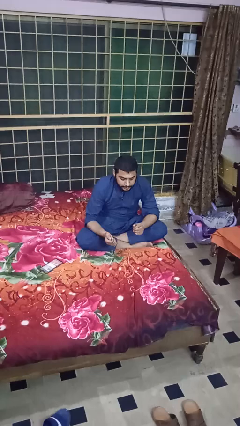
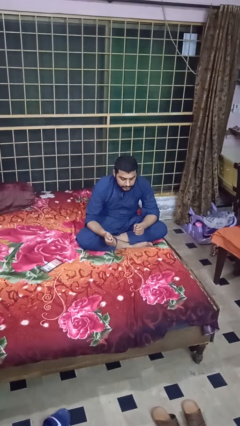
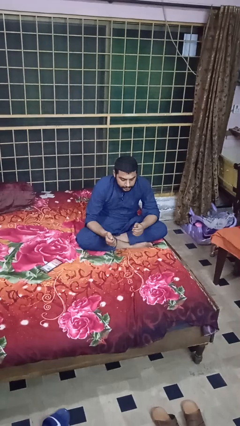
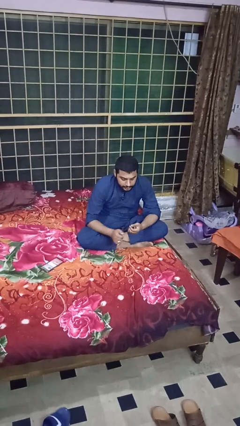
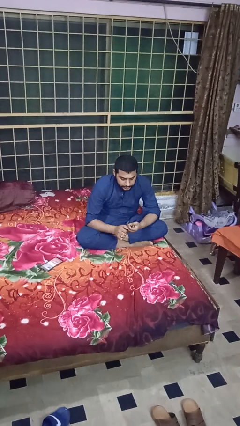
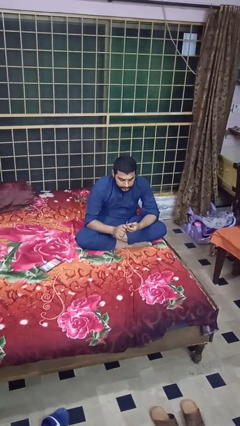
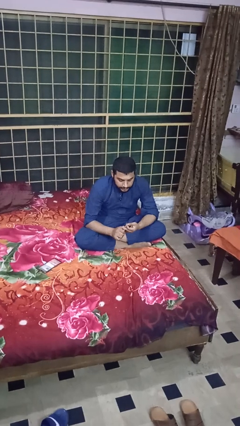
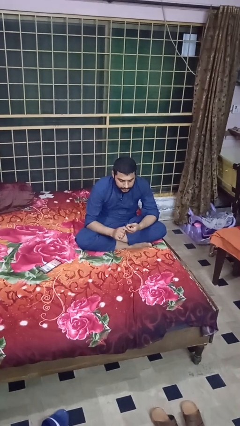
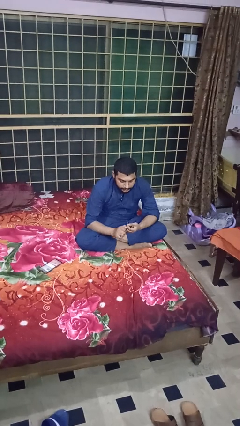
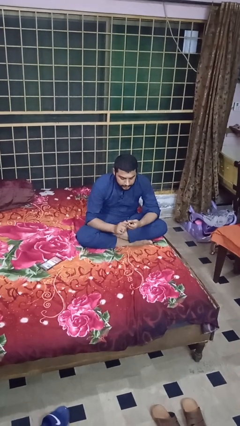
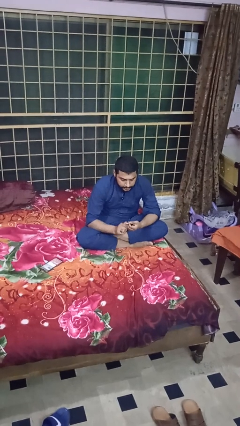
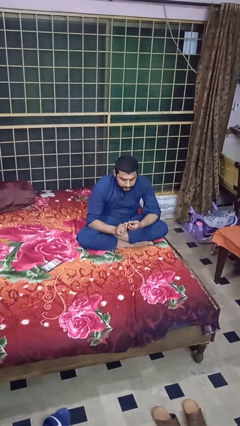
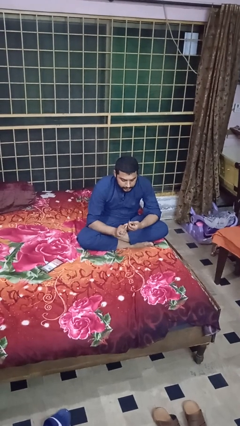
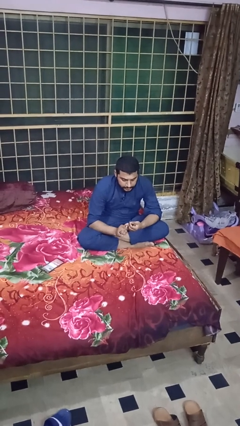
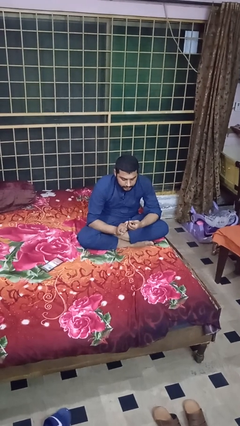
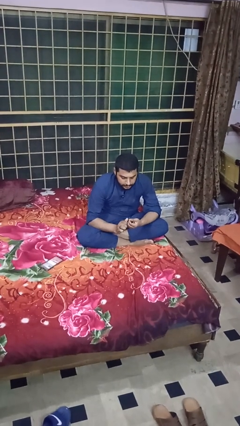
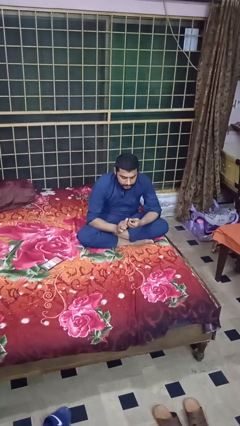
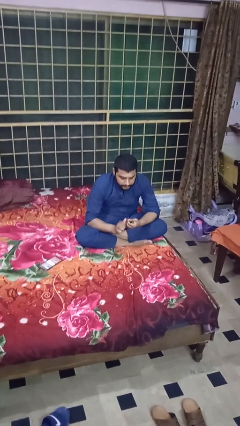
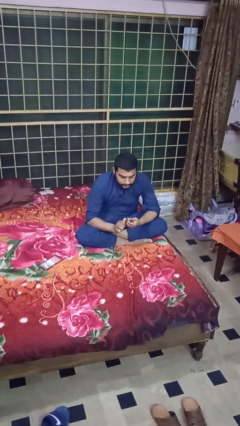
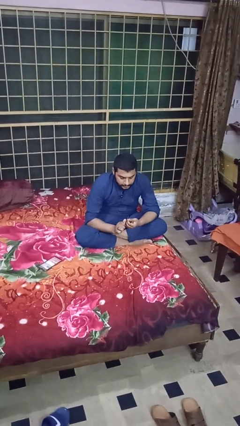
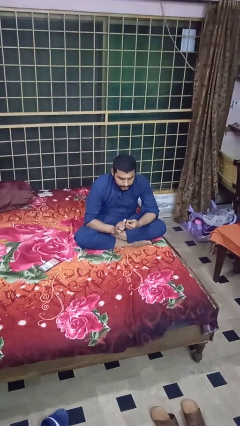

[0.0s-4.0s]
person files fingernails

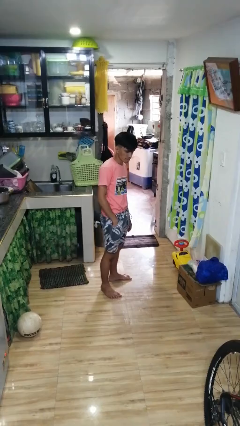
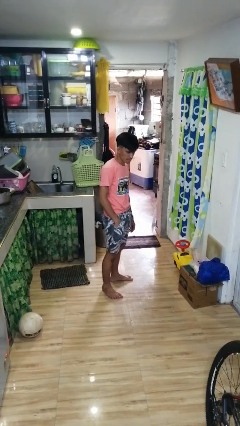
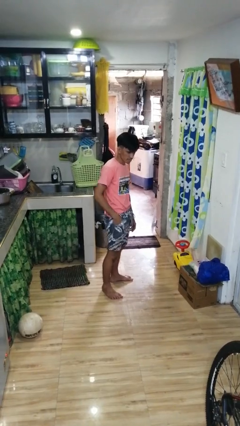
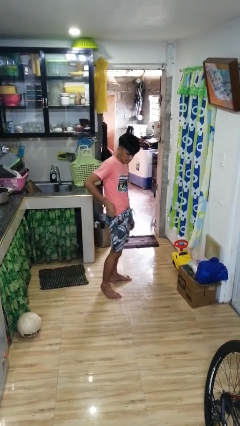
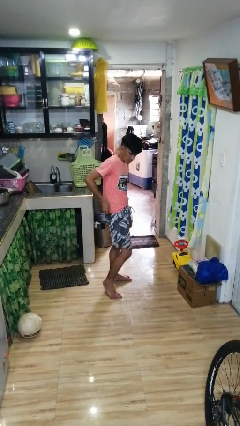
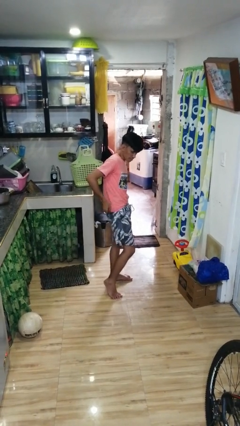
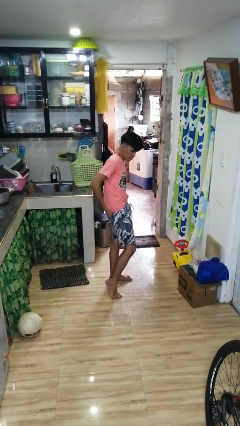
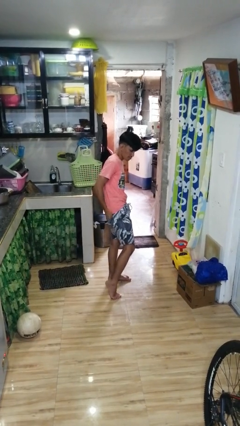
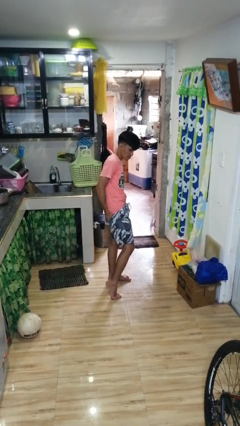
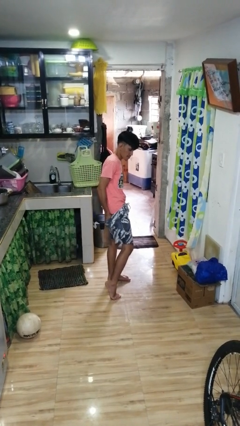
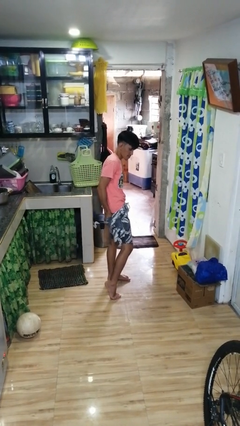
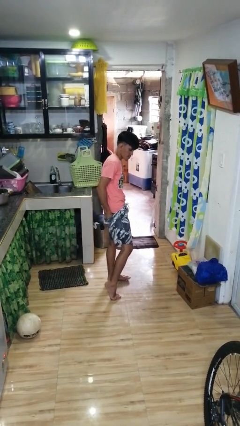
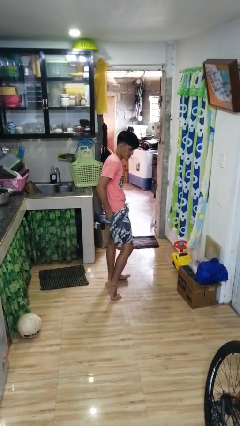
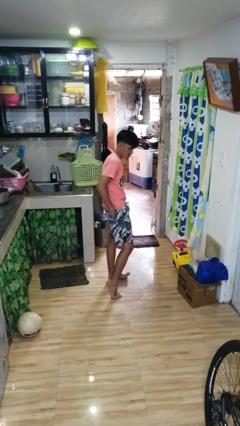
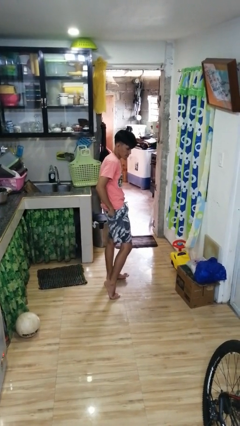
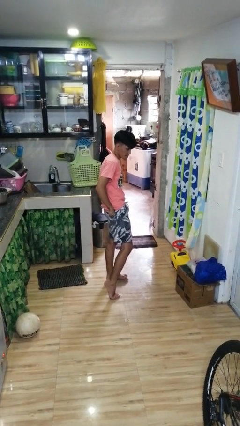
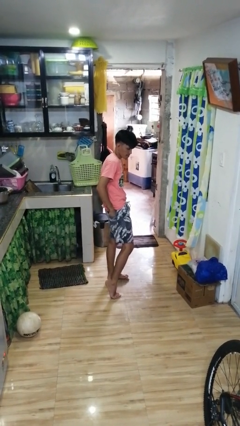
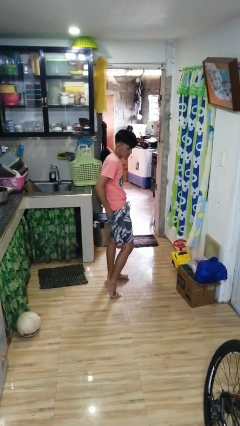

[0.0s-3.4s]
person puts hands in back pockets

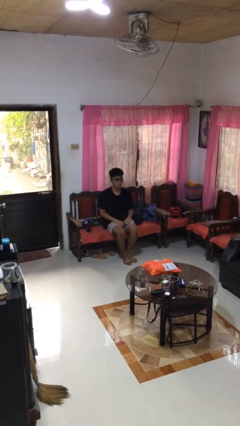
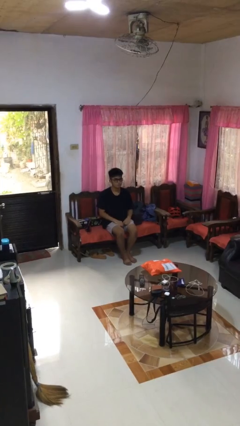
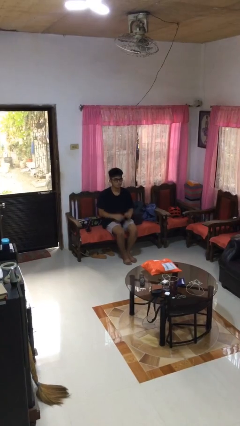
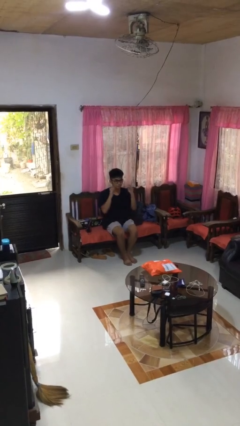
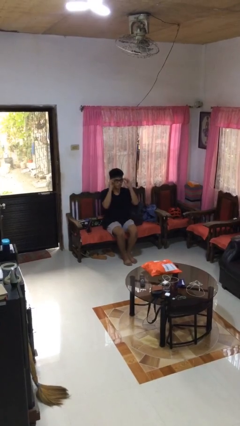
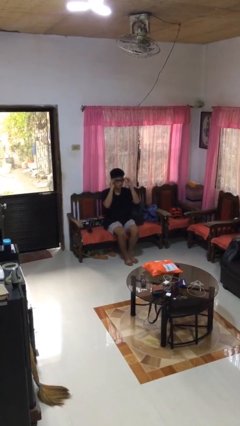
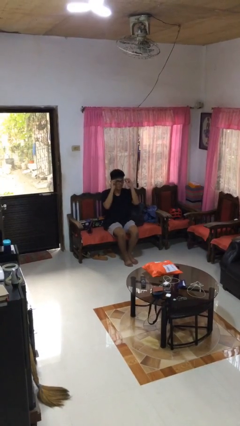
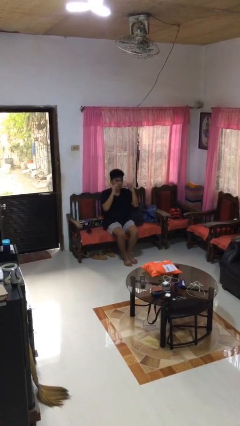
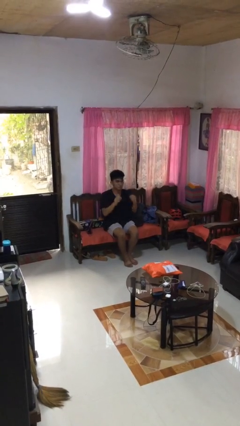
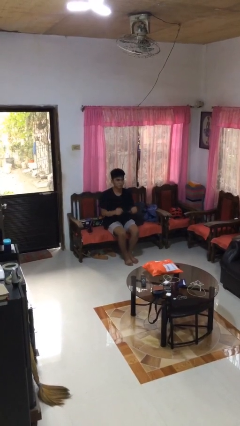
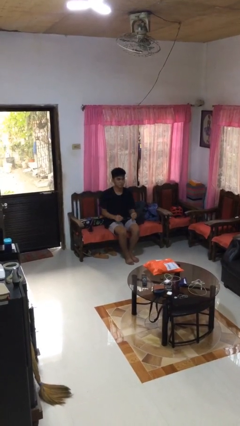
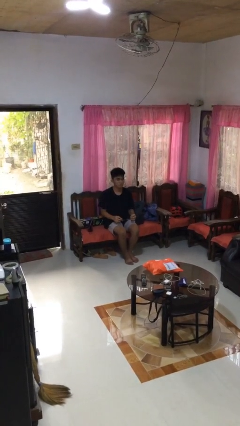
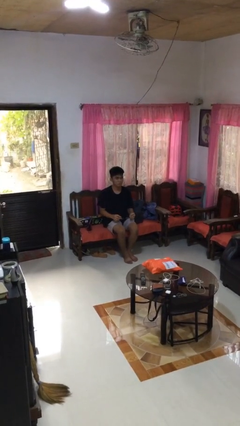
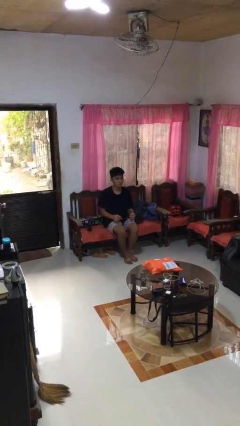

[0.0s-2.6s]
person takes off glasses

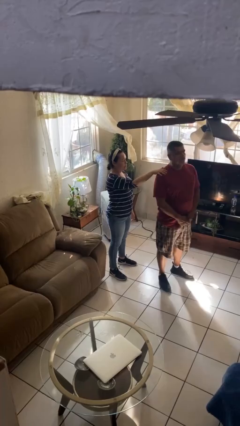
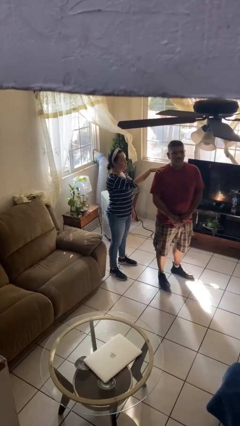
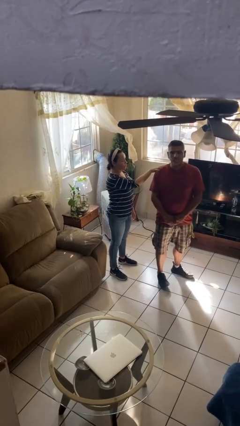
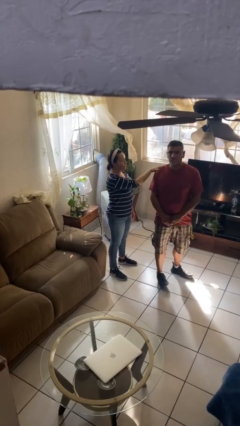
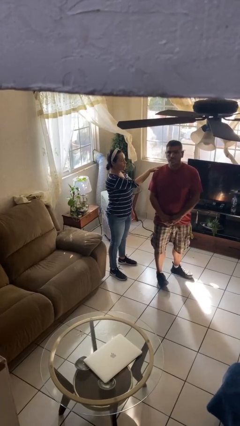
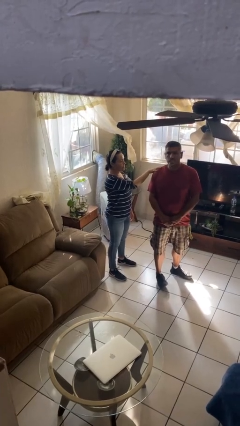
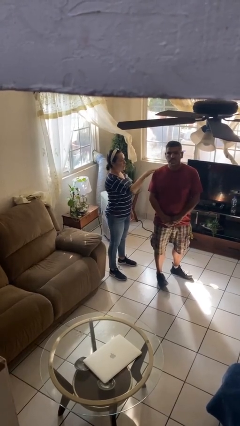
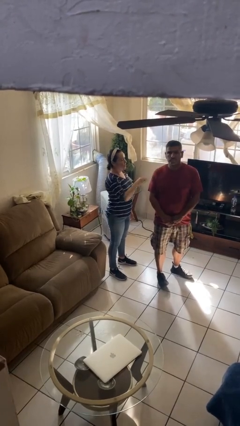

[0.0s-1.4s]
person spins person around

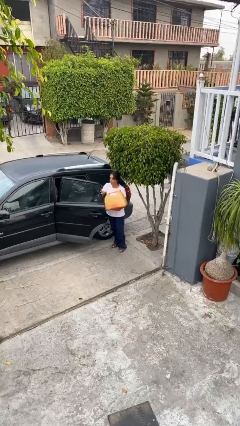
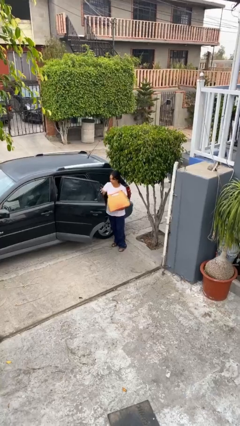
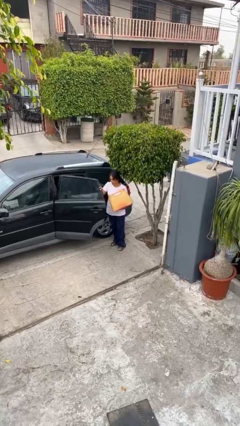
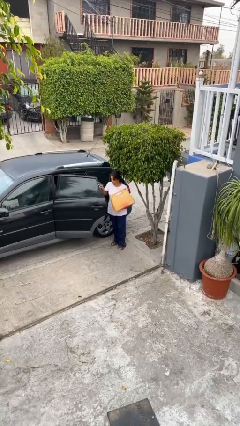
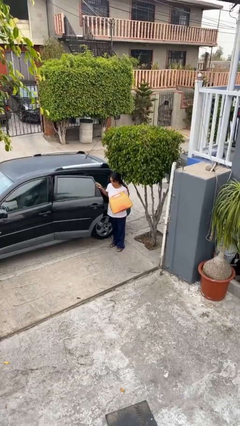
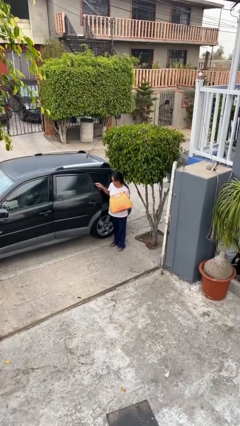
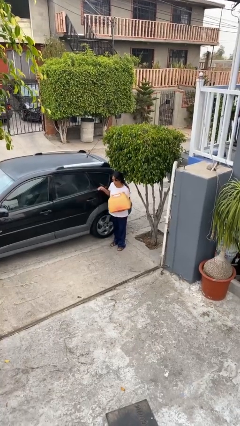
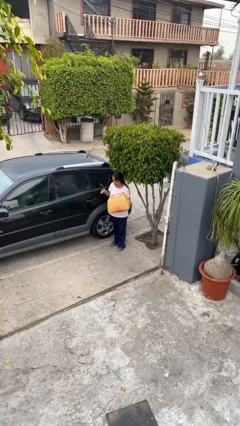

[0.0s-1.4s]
person closes car door

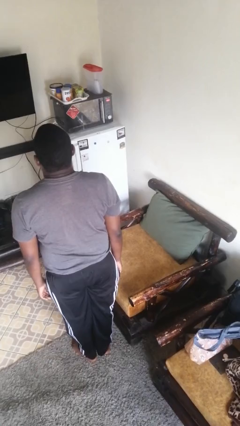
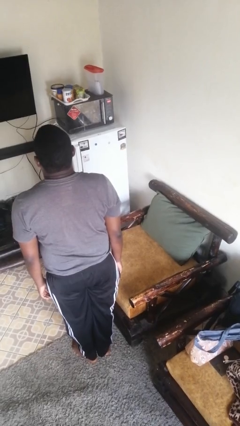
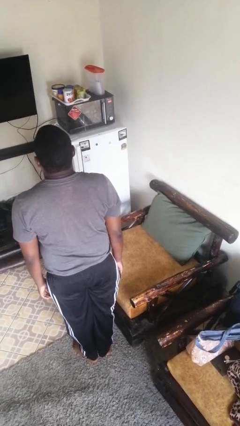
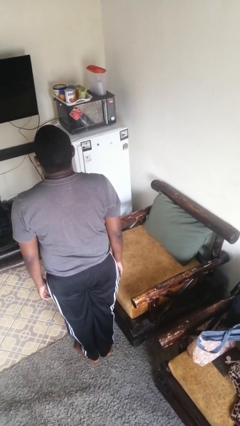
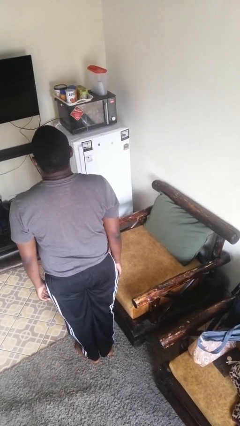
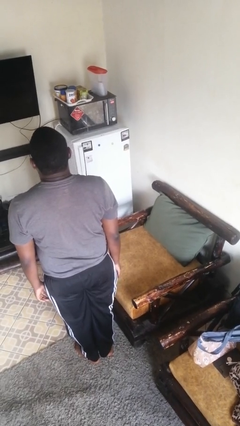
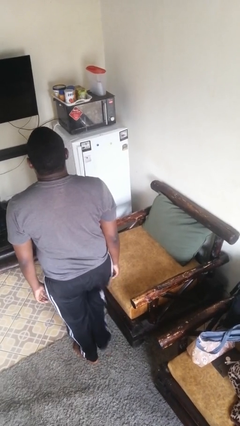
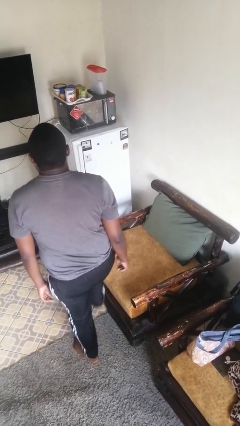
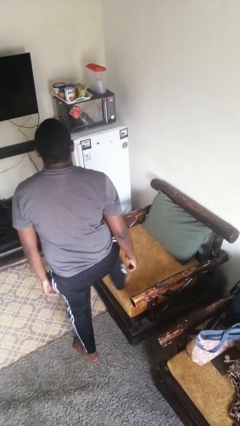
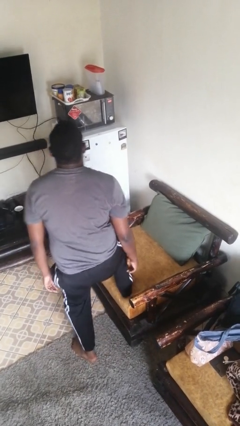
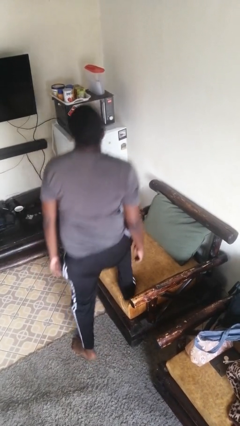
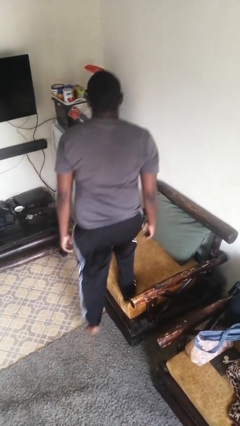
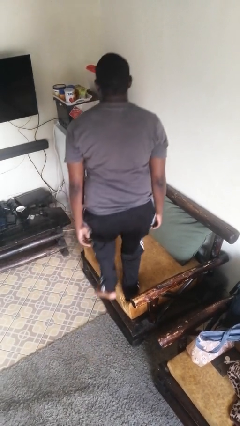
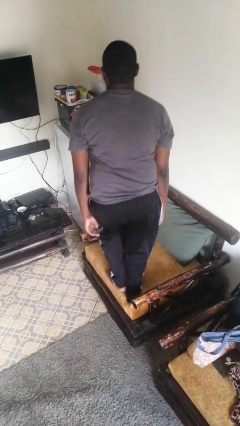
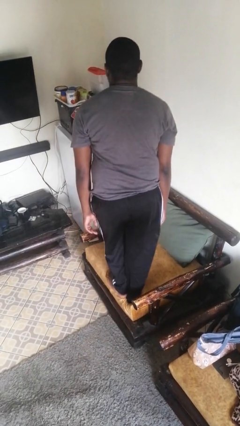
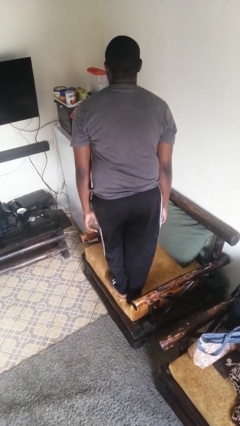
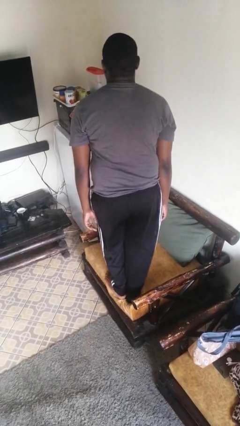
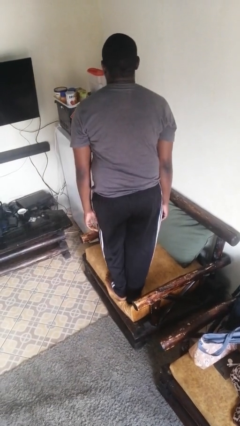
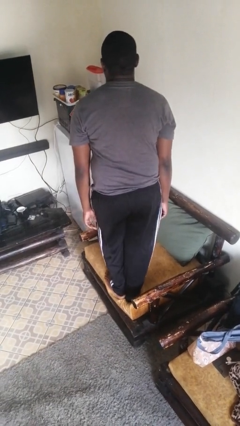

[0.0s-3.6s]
person climbs on couch

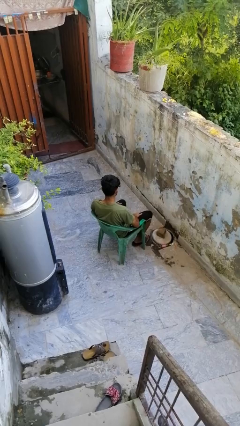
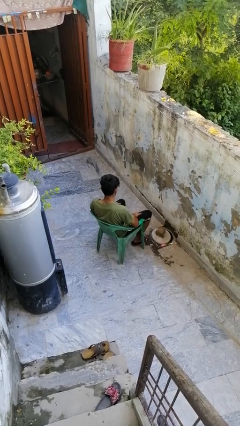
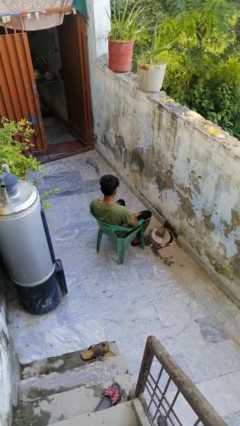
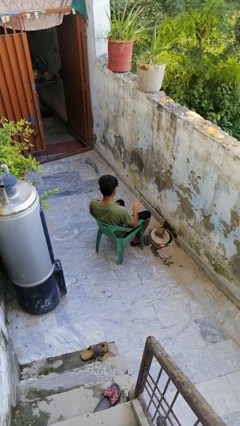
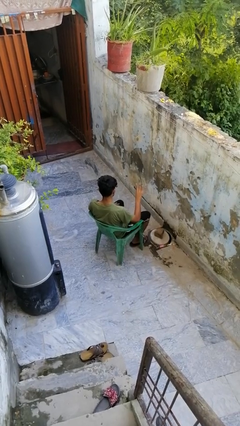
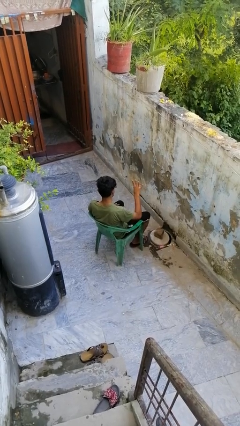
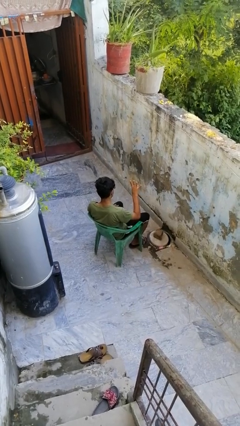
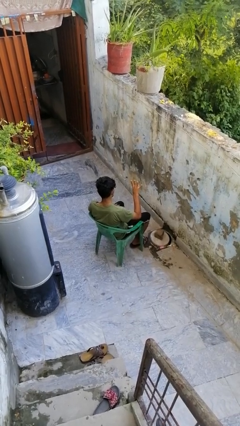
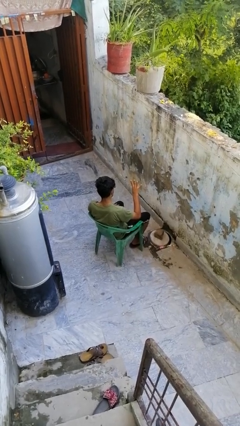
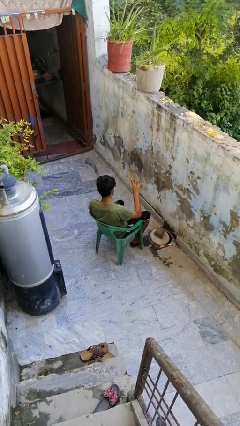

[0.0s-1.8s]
person gestures number four
